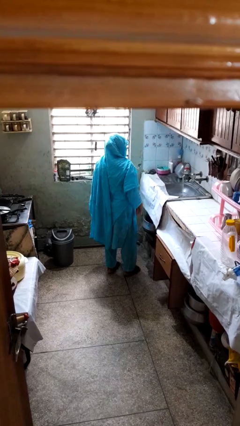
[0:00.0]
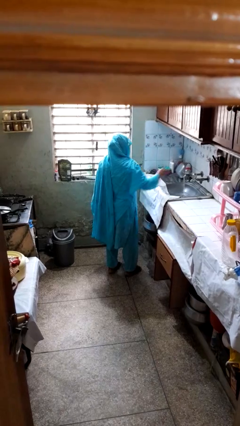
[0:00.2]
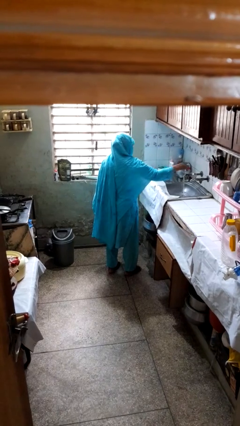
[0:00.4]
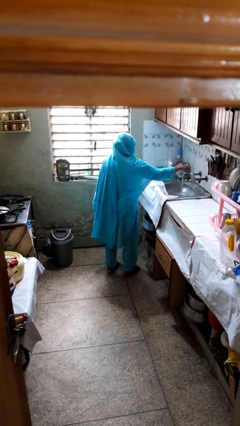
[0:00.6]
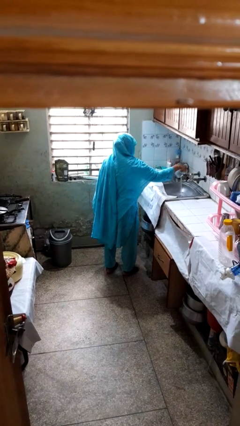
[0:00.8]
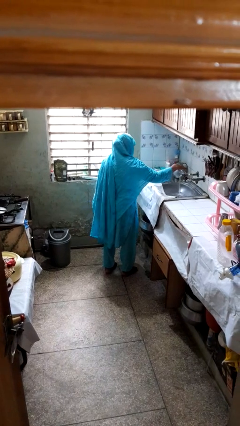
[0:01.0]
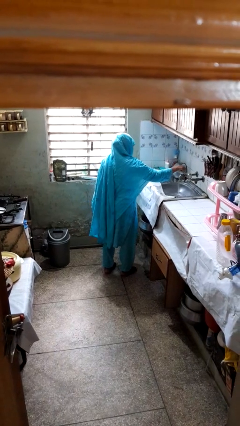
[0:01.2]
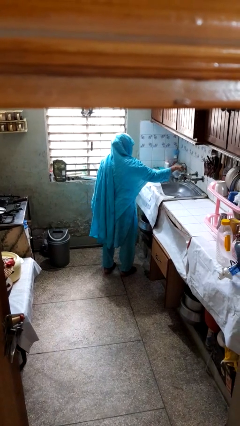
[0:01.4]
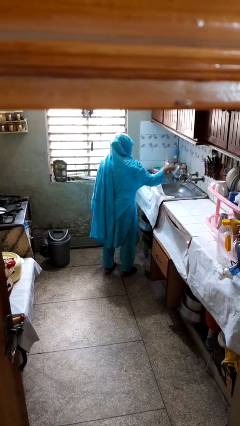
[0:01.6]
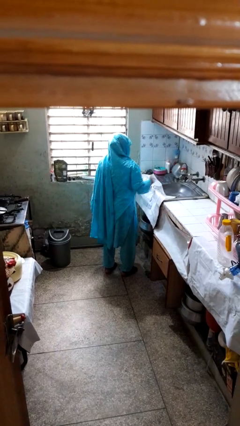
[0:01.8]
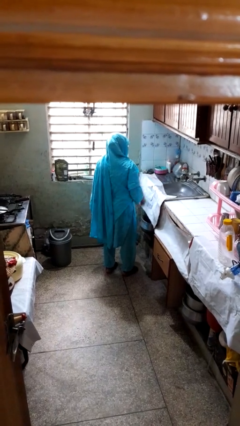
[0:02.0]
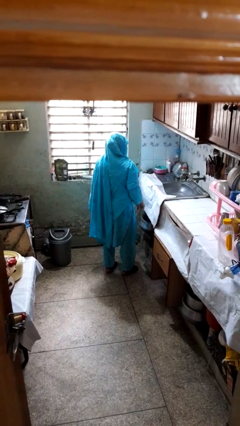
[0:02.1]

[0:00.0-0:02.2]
person turns off faucet

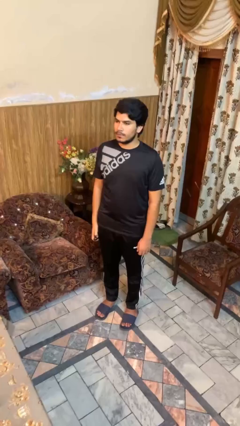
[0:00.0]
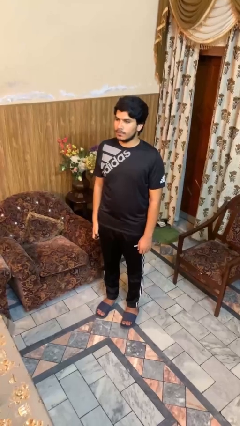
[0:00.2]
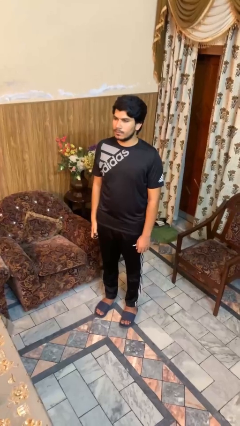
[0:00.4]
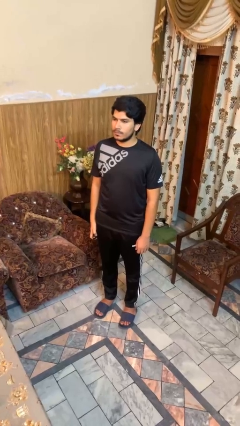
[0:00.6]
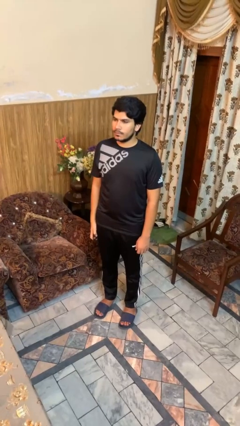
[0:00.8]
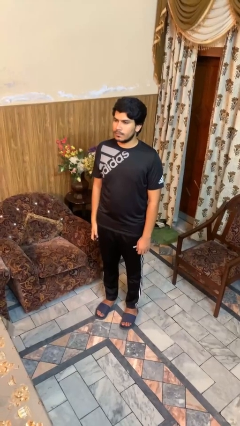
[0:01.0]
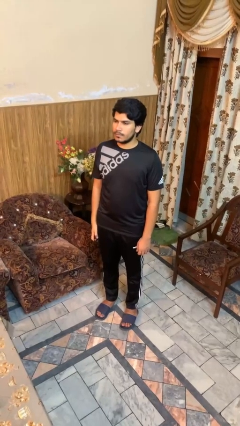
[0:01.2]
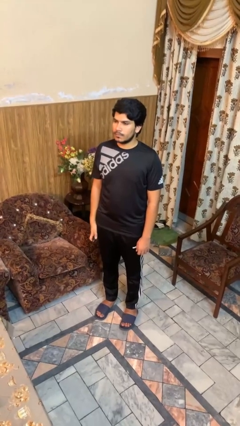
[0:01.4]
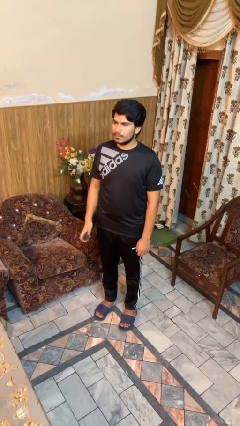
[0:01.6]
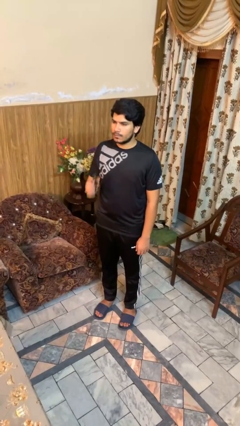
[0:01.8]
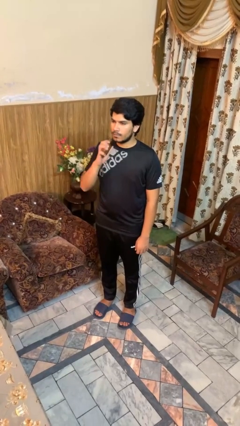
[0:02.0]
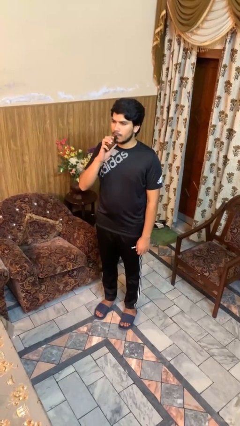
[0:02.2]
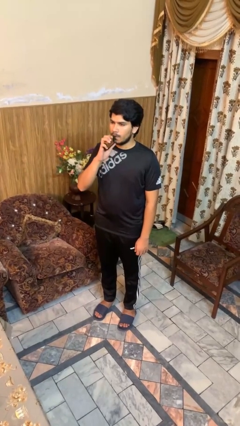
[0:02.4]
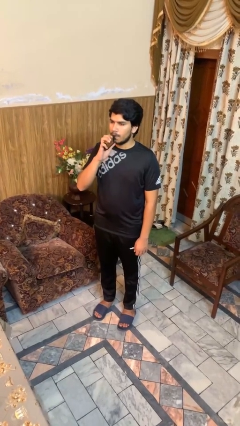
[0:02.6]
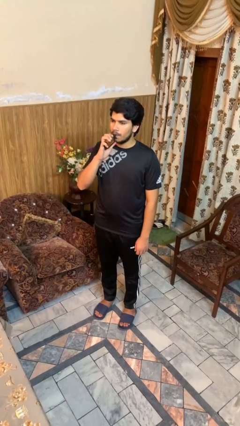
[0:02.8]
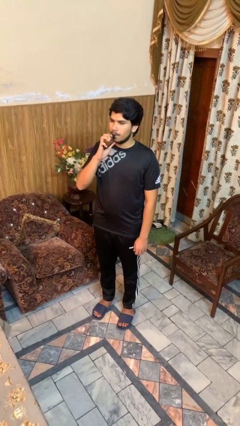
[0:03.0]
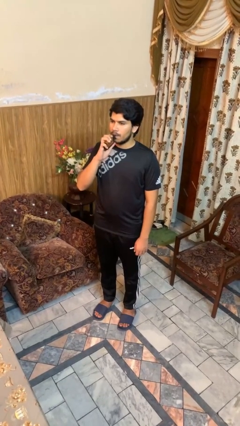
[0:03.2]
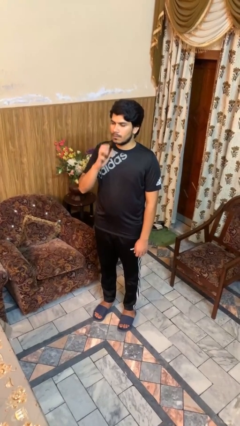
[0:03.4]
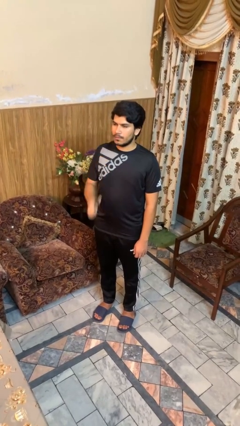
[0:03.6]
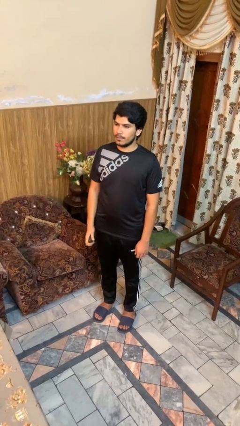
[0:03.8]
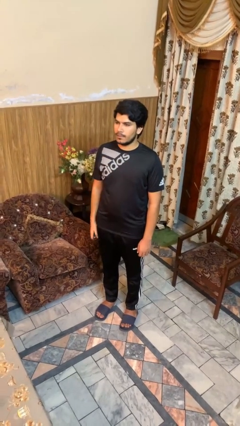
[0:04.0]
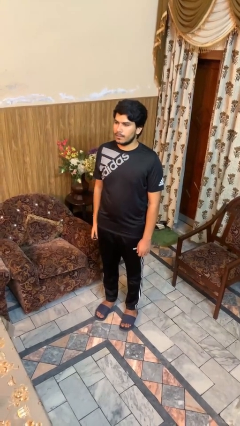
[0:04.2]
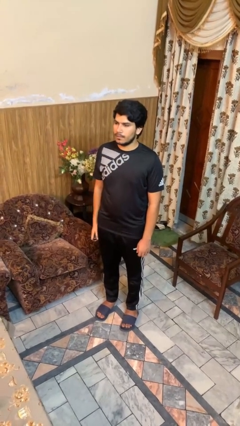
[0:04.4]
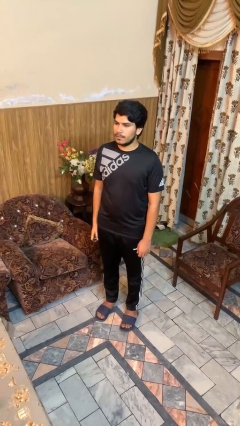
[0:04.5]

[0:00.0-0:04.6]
person vapes

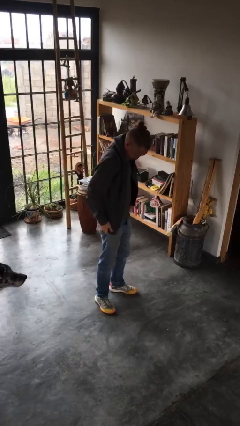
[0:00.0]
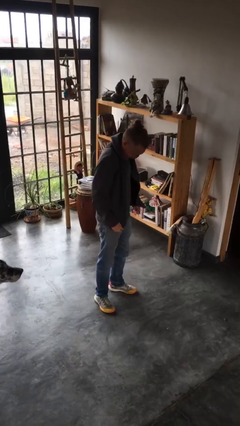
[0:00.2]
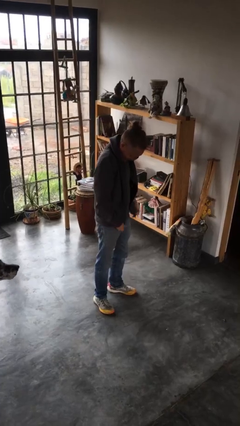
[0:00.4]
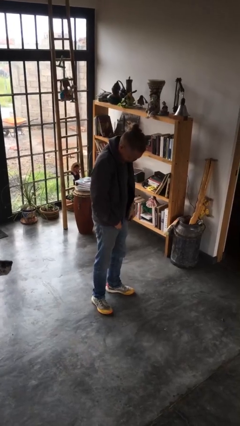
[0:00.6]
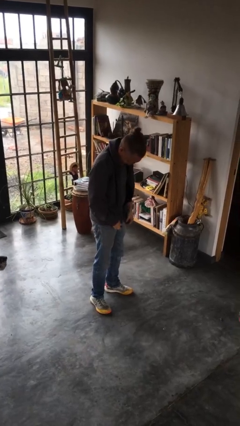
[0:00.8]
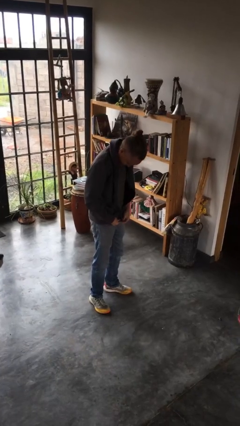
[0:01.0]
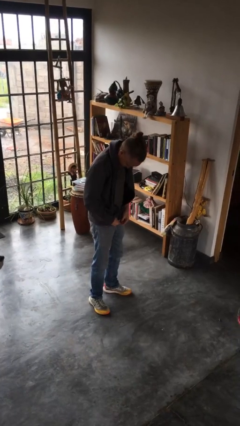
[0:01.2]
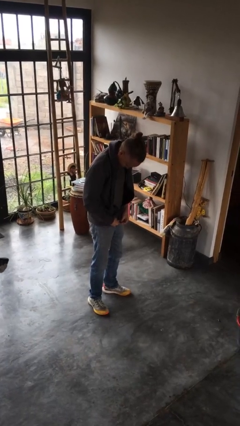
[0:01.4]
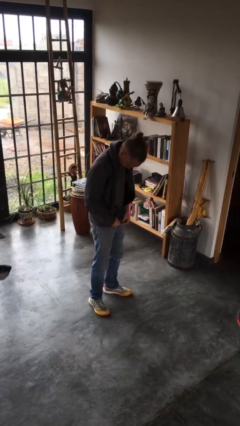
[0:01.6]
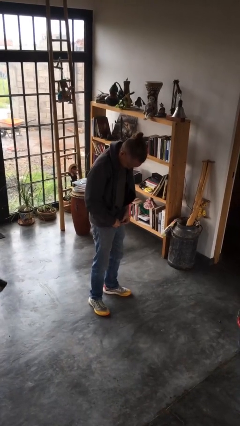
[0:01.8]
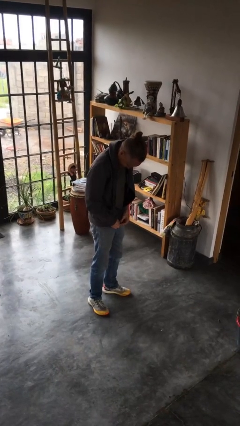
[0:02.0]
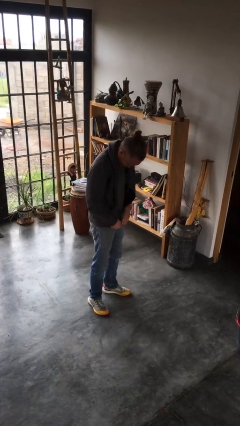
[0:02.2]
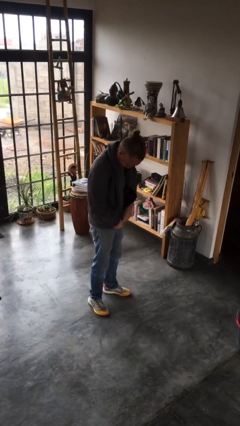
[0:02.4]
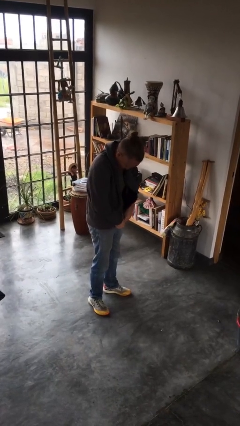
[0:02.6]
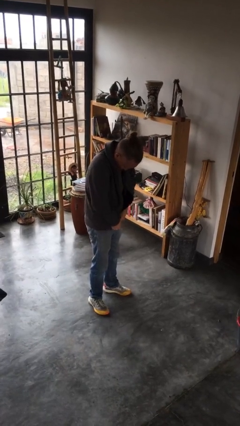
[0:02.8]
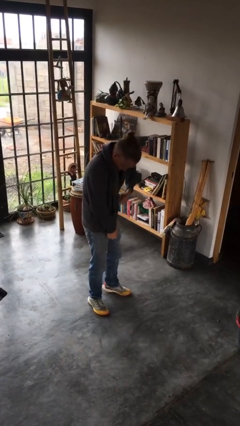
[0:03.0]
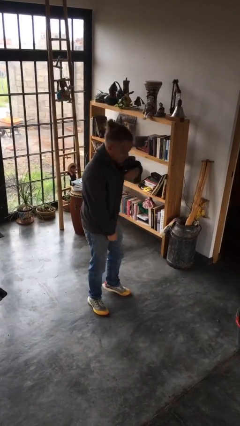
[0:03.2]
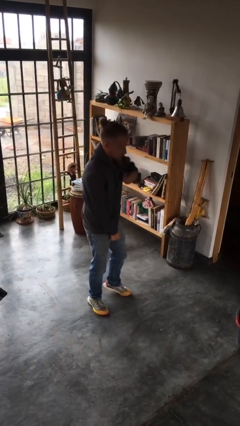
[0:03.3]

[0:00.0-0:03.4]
person zips up jacket

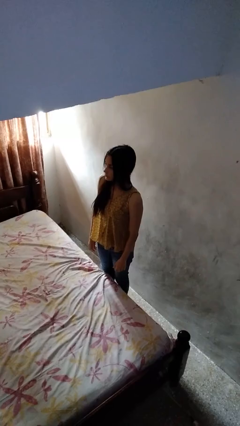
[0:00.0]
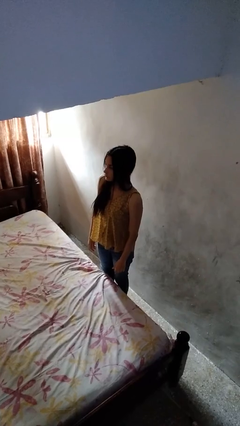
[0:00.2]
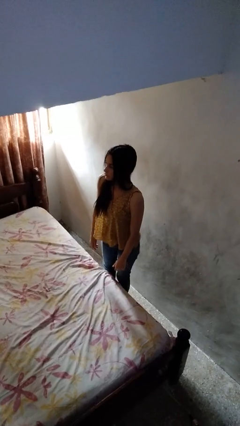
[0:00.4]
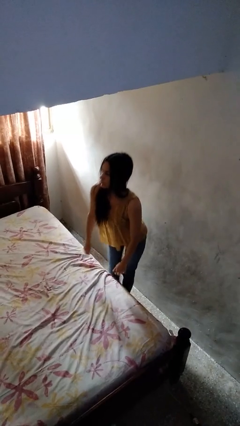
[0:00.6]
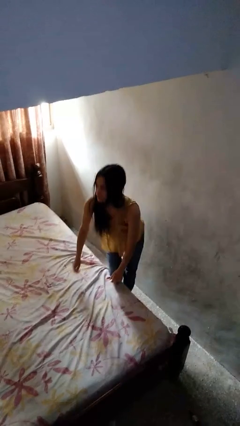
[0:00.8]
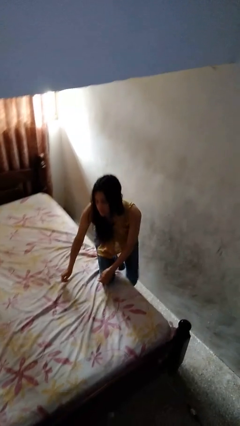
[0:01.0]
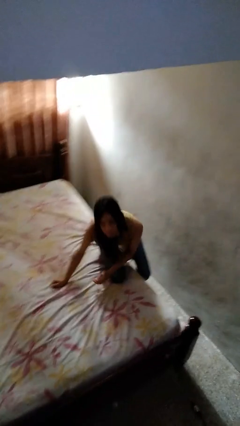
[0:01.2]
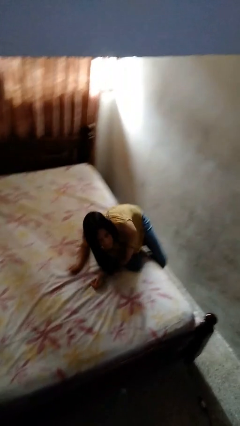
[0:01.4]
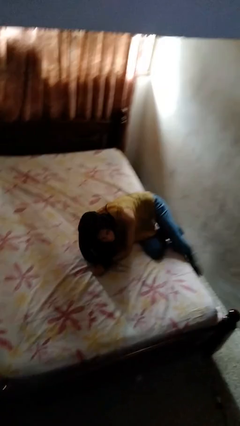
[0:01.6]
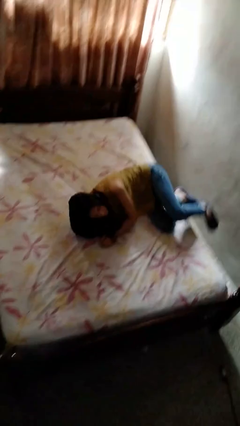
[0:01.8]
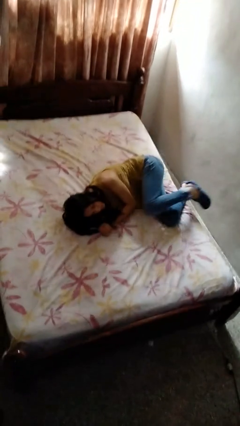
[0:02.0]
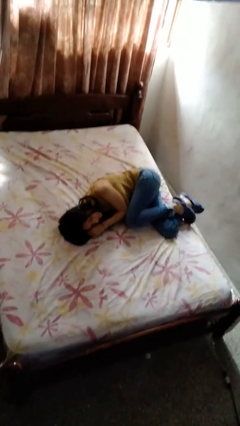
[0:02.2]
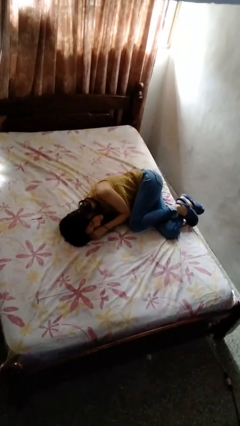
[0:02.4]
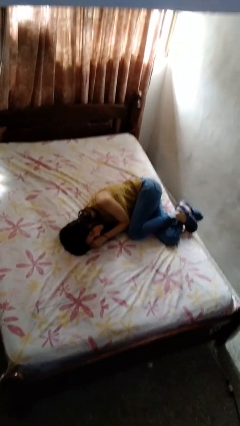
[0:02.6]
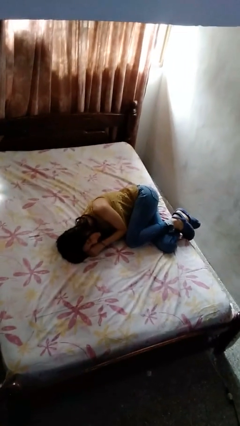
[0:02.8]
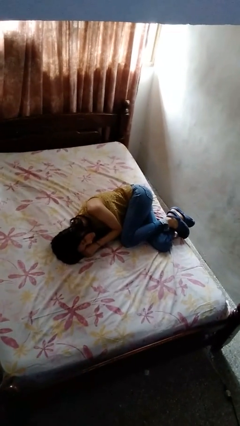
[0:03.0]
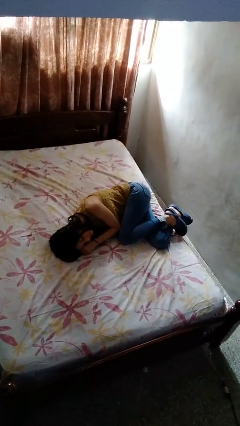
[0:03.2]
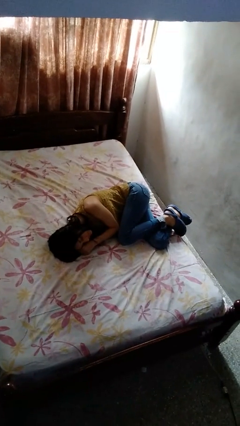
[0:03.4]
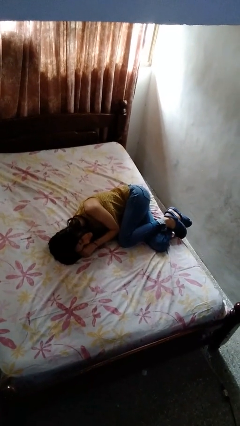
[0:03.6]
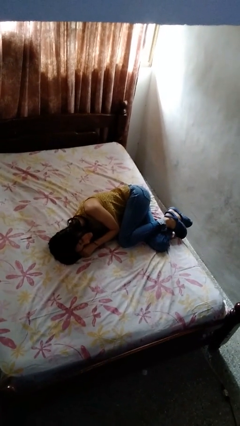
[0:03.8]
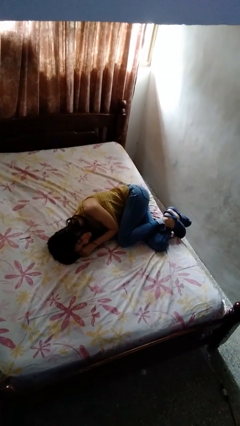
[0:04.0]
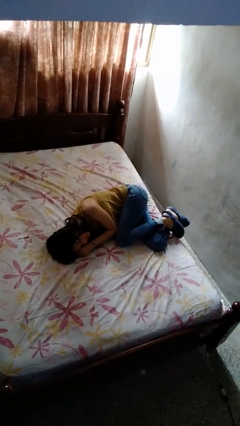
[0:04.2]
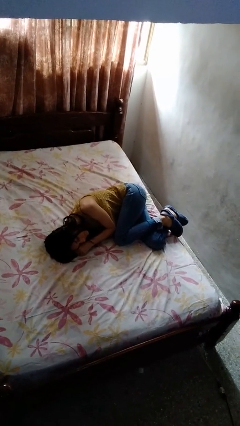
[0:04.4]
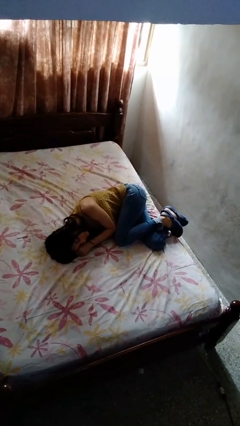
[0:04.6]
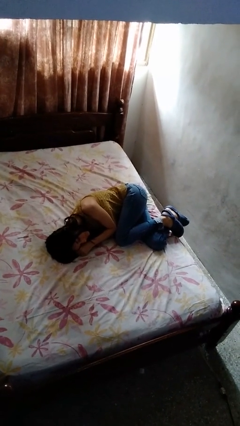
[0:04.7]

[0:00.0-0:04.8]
person lies down on bed

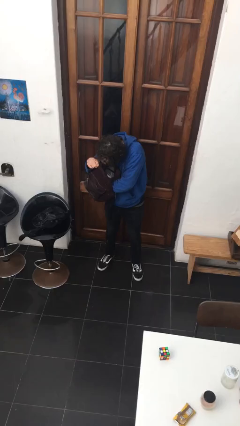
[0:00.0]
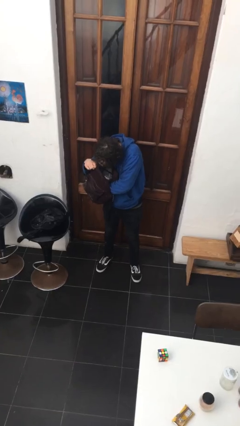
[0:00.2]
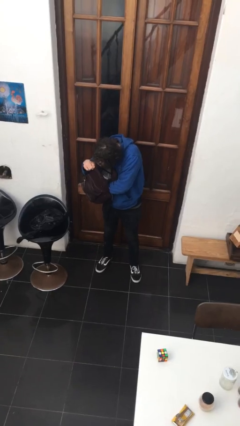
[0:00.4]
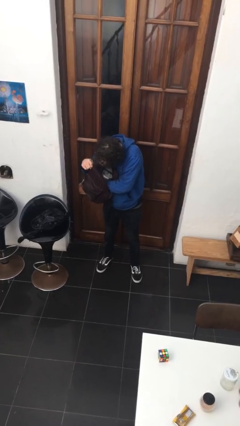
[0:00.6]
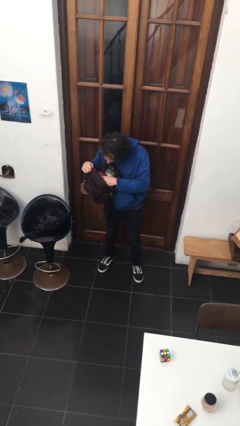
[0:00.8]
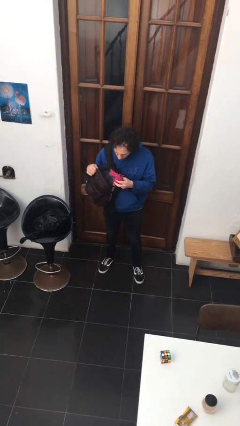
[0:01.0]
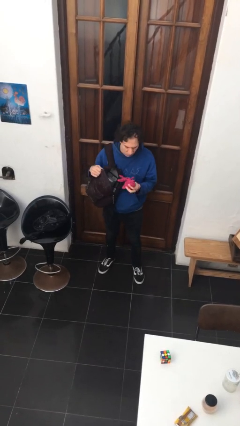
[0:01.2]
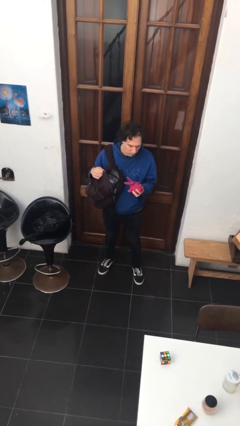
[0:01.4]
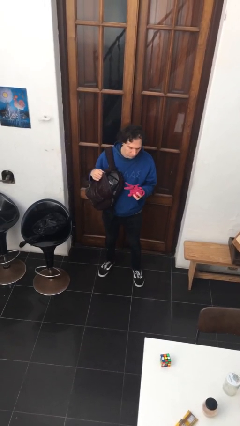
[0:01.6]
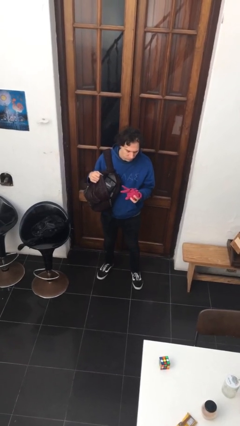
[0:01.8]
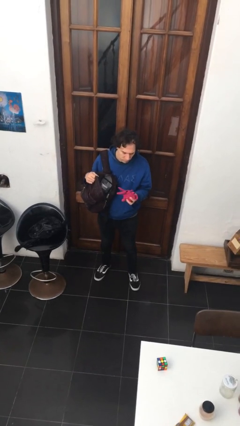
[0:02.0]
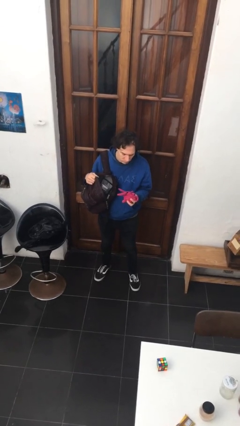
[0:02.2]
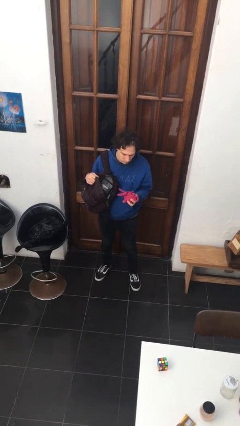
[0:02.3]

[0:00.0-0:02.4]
person takes object from backpack
